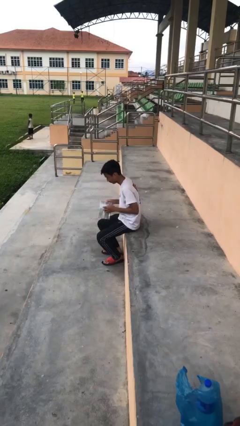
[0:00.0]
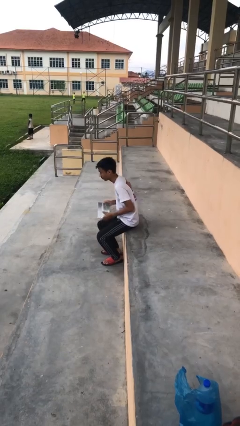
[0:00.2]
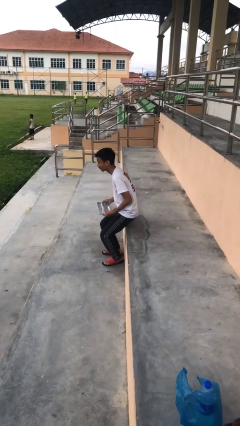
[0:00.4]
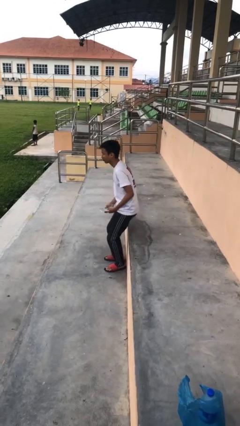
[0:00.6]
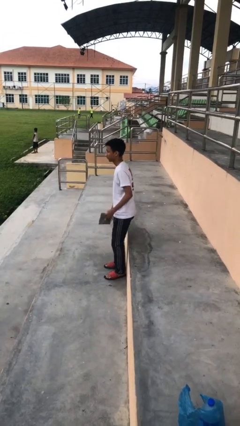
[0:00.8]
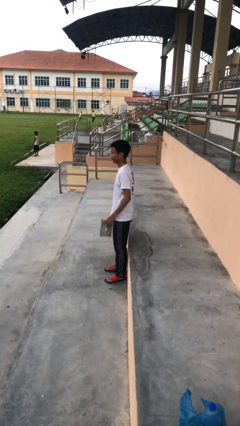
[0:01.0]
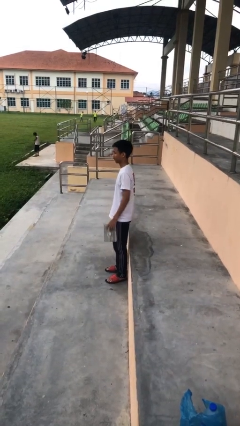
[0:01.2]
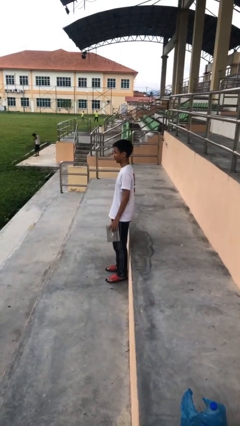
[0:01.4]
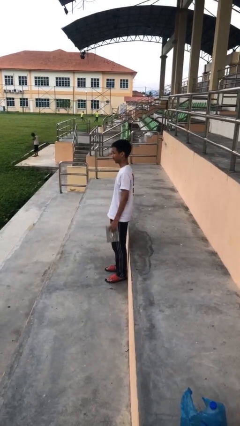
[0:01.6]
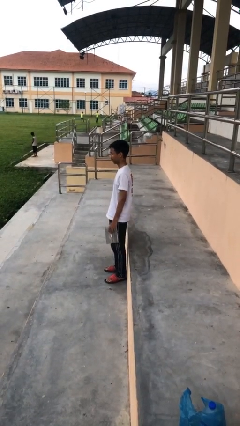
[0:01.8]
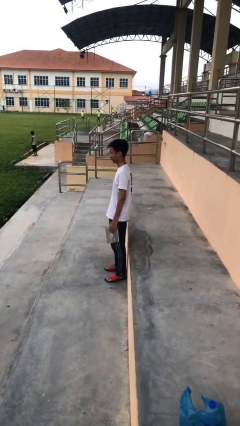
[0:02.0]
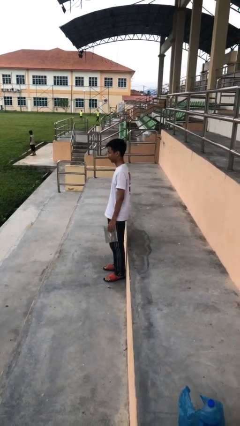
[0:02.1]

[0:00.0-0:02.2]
person stands up

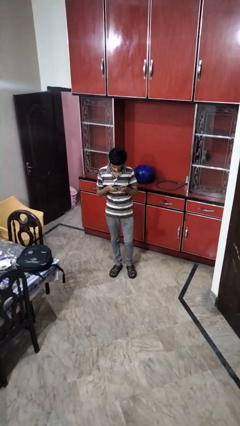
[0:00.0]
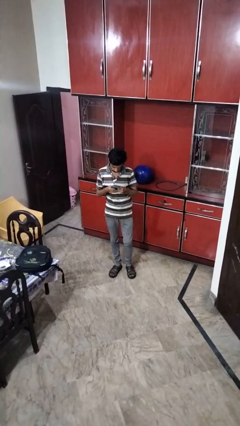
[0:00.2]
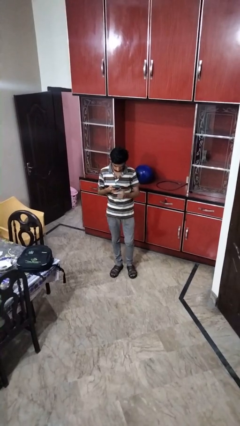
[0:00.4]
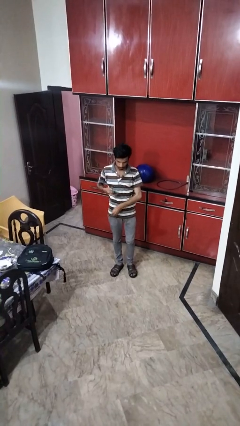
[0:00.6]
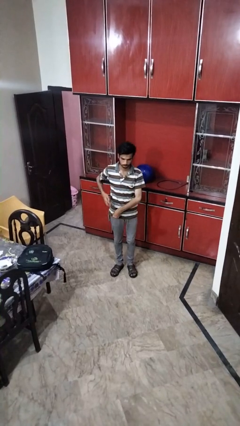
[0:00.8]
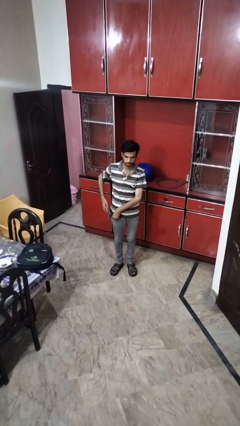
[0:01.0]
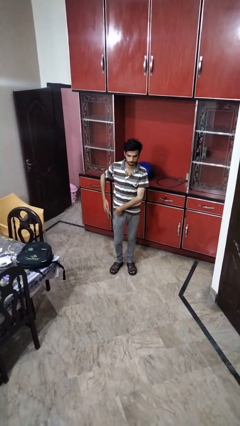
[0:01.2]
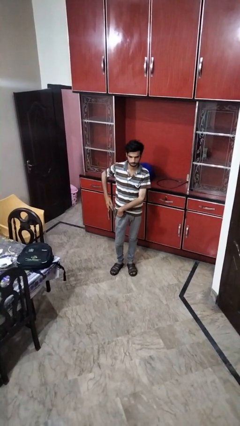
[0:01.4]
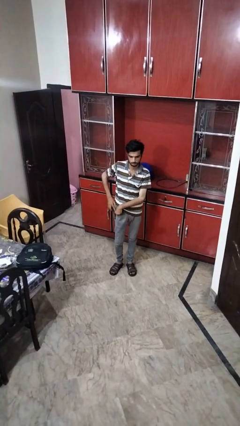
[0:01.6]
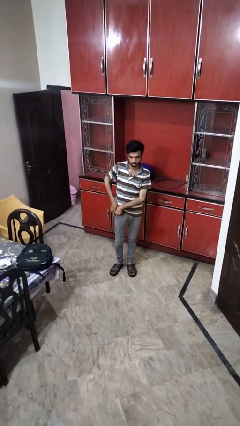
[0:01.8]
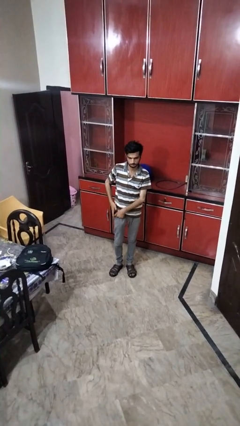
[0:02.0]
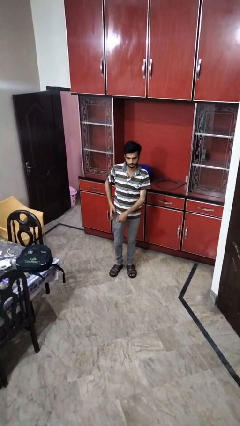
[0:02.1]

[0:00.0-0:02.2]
person puts phone into pocket

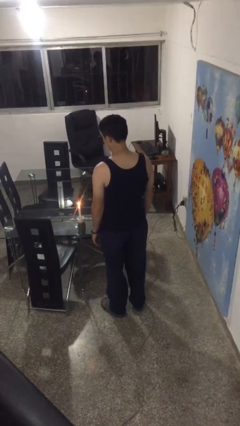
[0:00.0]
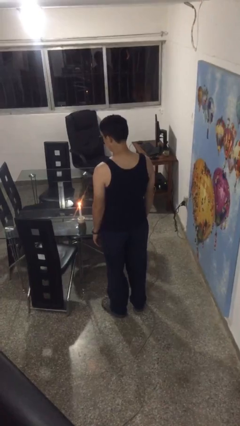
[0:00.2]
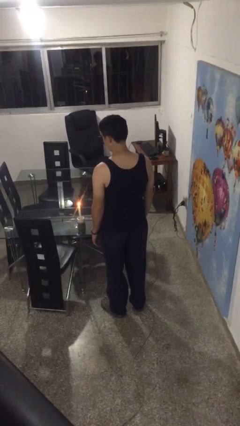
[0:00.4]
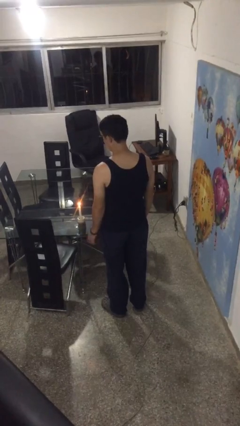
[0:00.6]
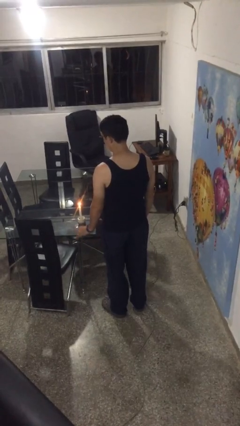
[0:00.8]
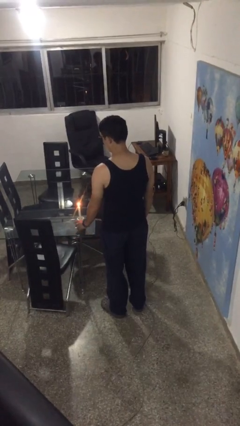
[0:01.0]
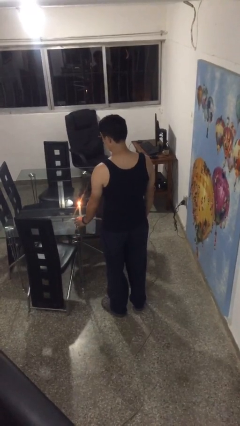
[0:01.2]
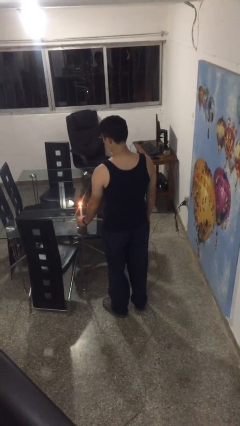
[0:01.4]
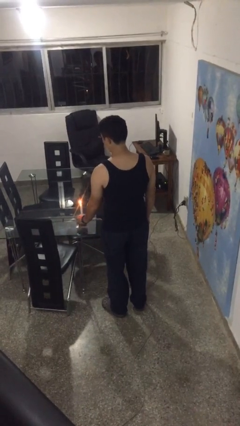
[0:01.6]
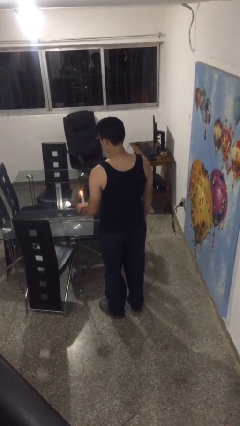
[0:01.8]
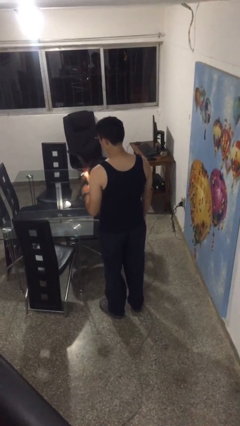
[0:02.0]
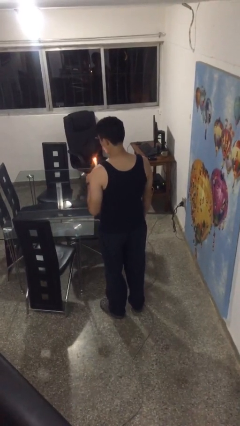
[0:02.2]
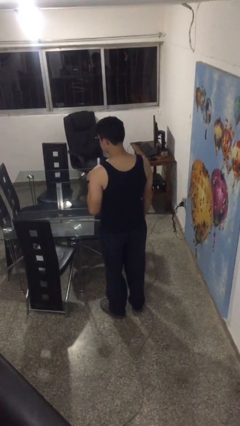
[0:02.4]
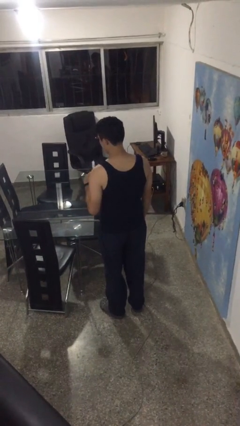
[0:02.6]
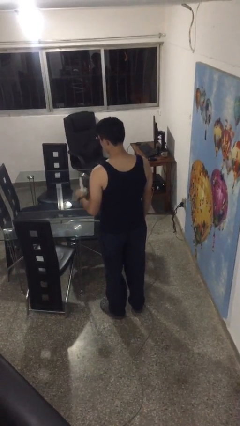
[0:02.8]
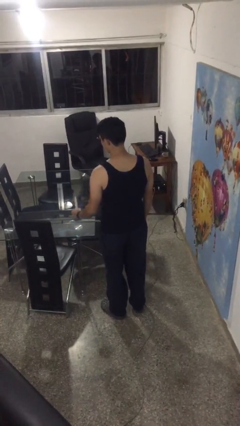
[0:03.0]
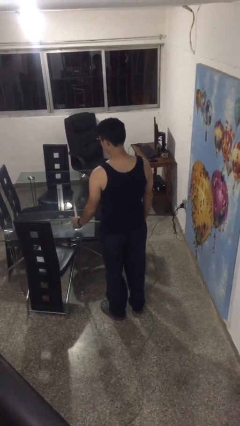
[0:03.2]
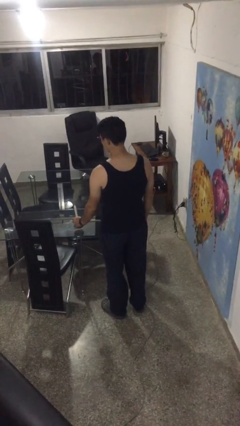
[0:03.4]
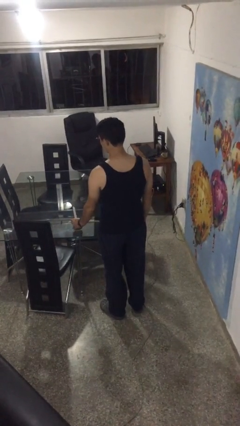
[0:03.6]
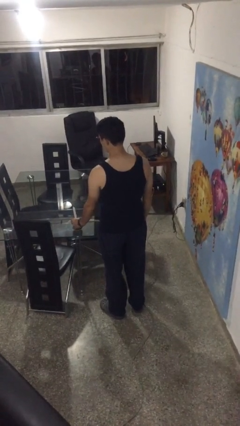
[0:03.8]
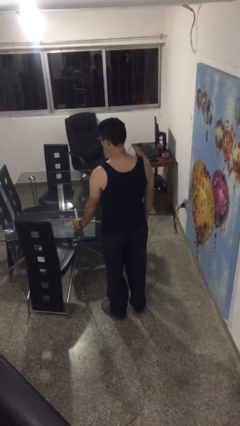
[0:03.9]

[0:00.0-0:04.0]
person extinguishes candle

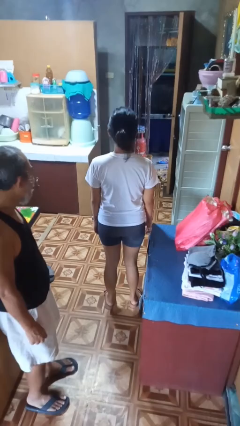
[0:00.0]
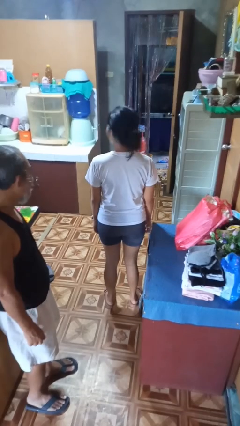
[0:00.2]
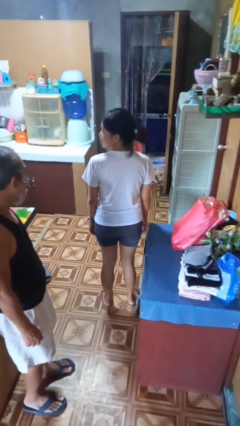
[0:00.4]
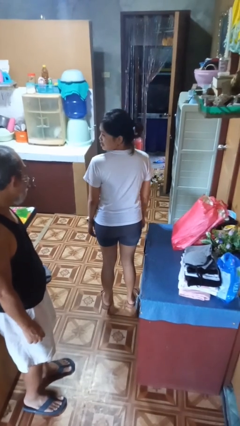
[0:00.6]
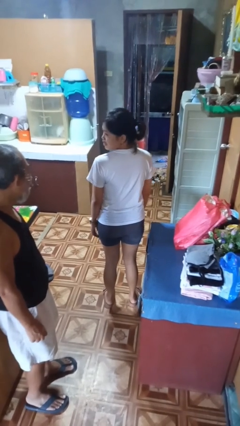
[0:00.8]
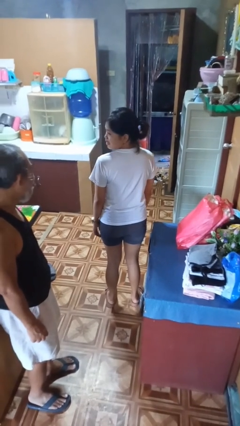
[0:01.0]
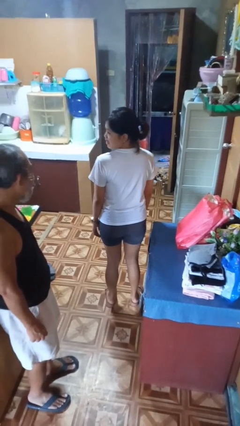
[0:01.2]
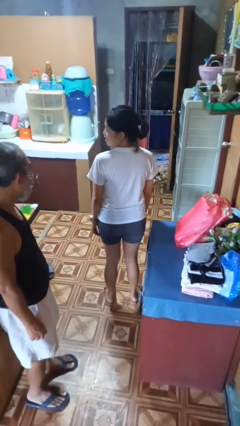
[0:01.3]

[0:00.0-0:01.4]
person looks over shoulder

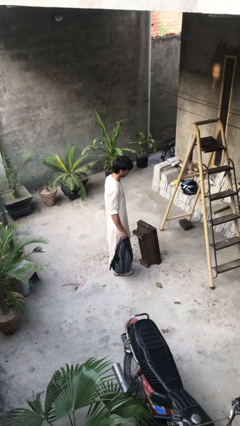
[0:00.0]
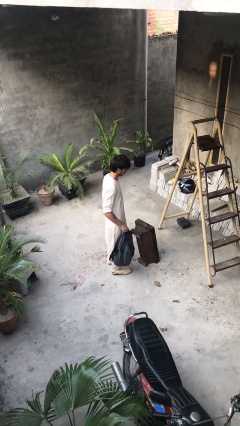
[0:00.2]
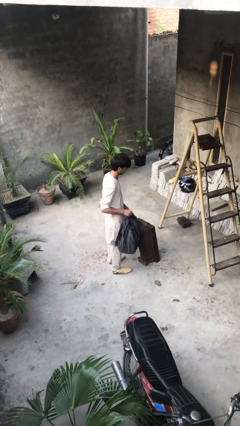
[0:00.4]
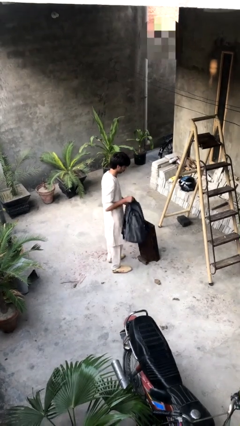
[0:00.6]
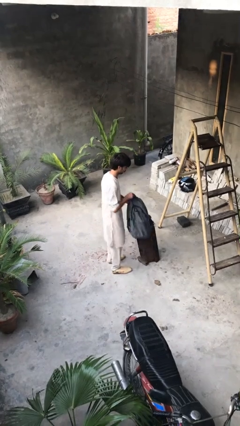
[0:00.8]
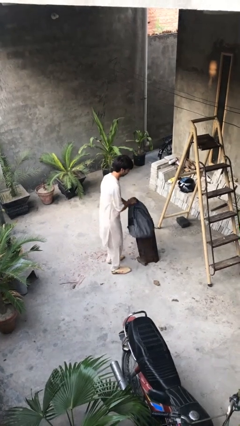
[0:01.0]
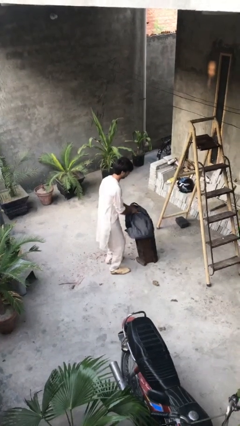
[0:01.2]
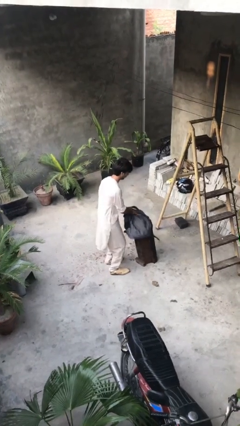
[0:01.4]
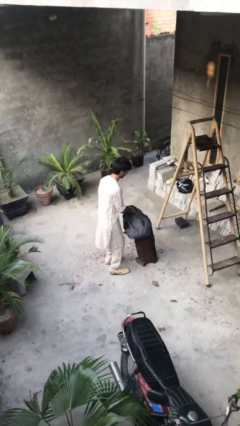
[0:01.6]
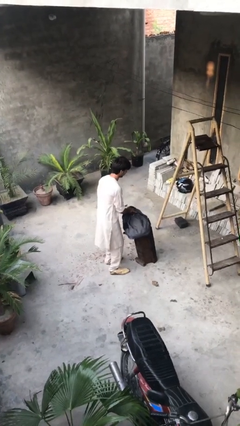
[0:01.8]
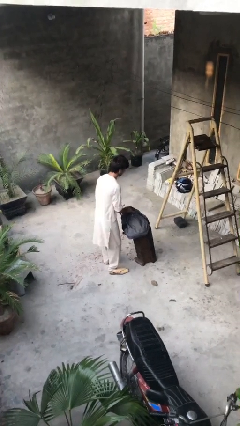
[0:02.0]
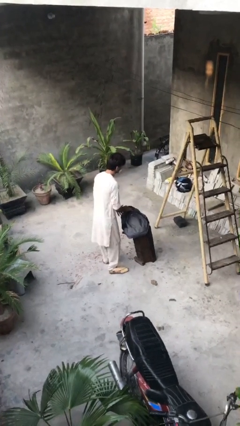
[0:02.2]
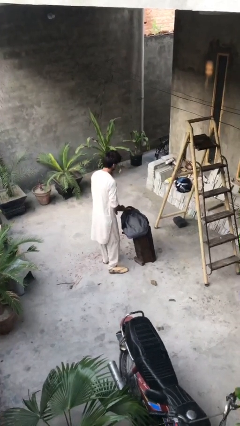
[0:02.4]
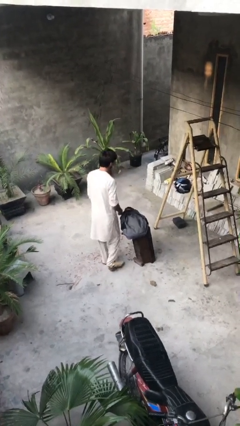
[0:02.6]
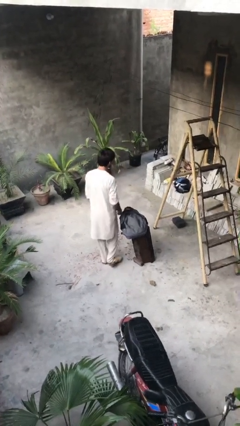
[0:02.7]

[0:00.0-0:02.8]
person puts down object on table

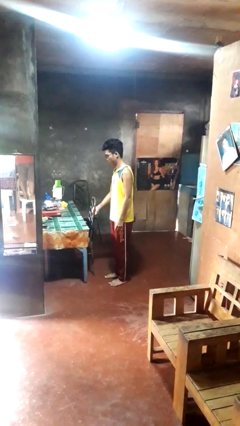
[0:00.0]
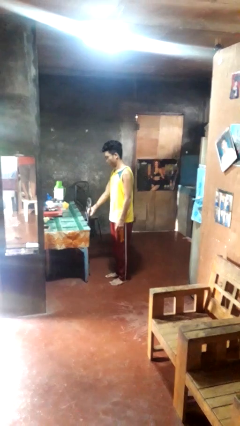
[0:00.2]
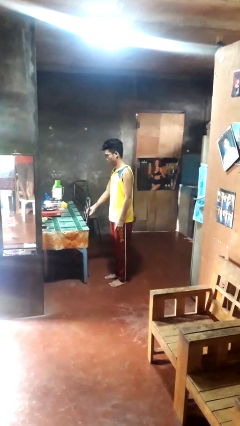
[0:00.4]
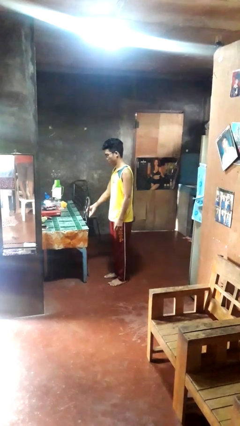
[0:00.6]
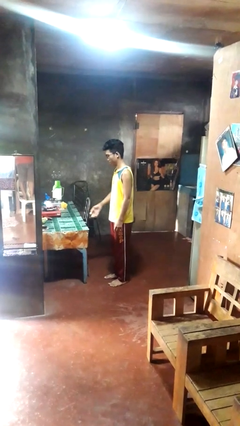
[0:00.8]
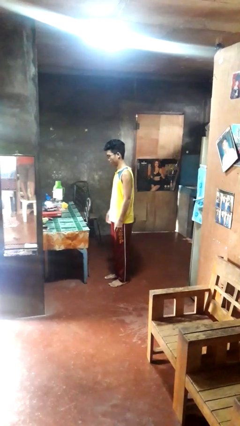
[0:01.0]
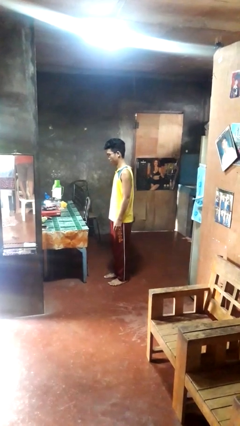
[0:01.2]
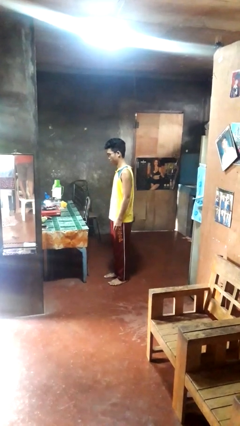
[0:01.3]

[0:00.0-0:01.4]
person pushes in chair

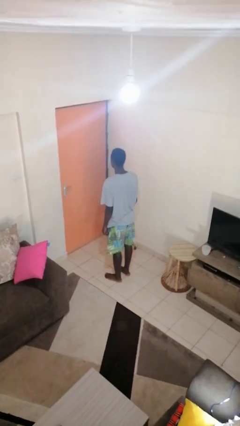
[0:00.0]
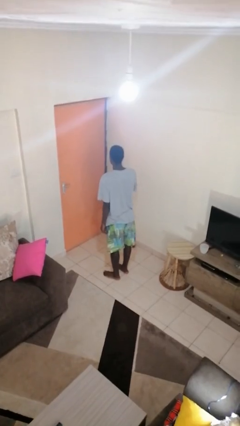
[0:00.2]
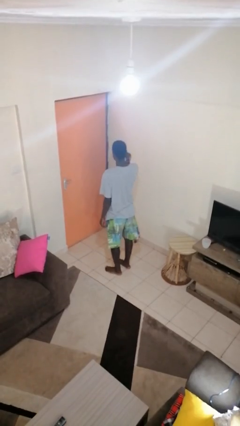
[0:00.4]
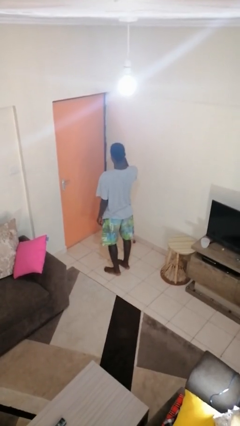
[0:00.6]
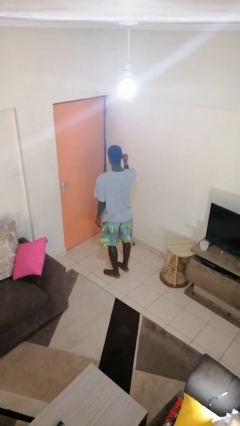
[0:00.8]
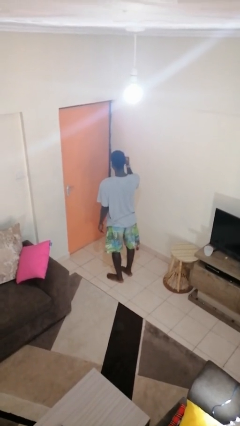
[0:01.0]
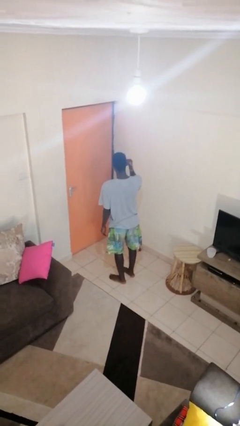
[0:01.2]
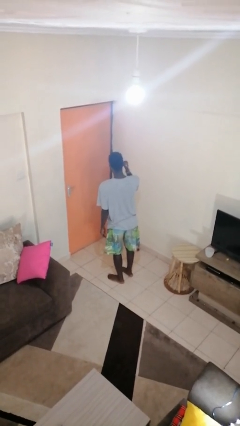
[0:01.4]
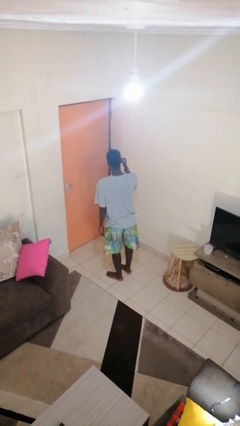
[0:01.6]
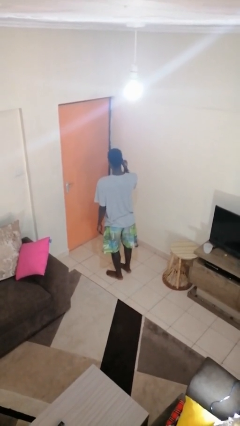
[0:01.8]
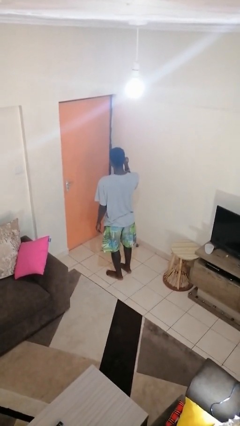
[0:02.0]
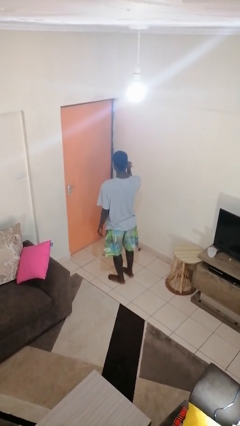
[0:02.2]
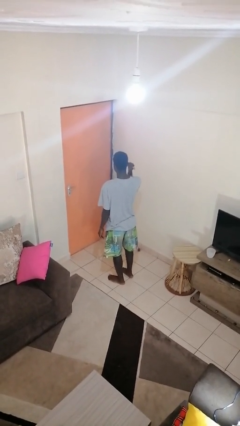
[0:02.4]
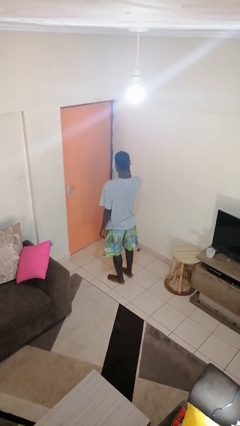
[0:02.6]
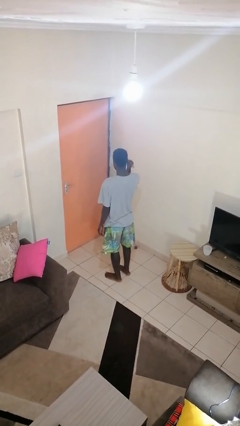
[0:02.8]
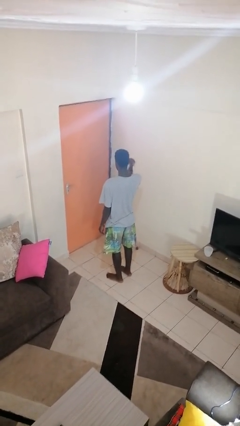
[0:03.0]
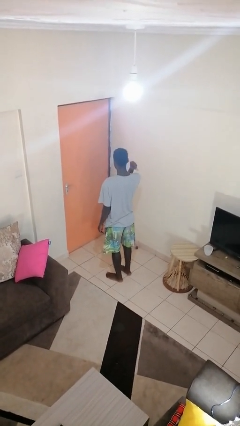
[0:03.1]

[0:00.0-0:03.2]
person gestures behind me
